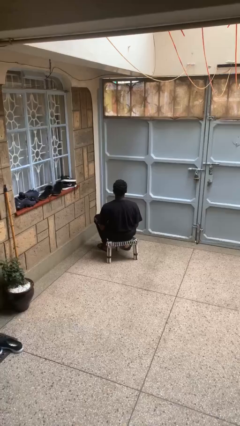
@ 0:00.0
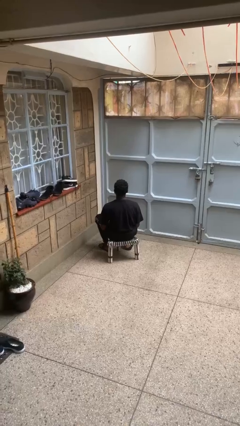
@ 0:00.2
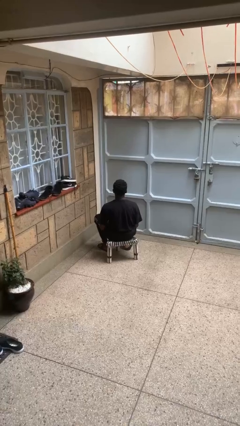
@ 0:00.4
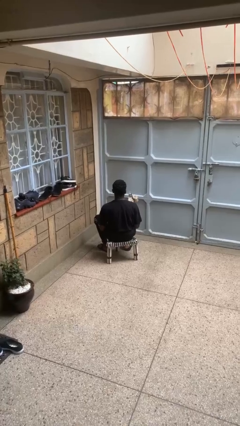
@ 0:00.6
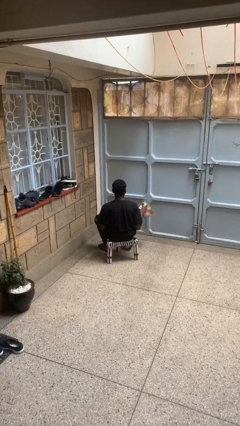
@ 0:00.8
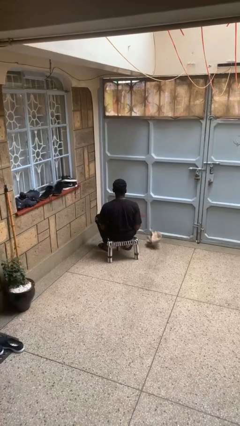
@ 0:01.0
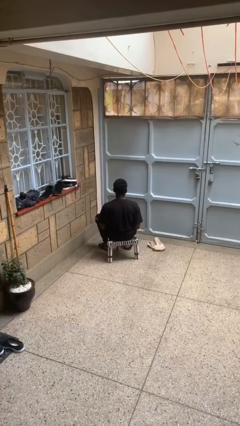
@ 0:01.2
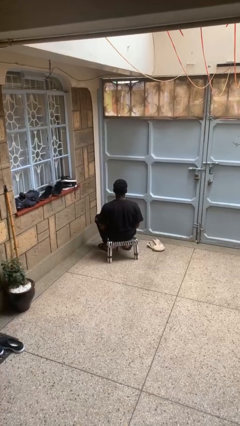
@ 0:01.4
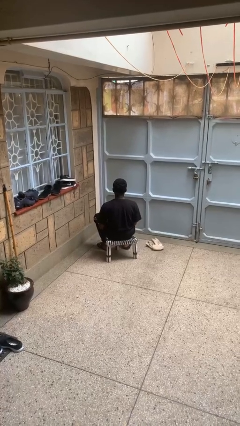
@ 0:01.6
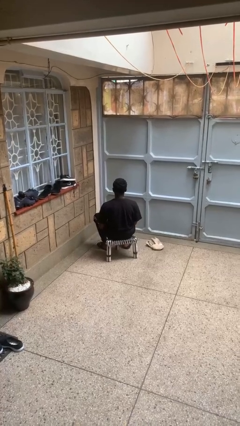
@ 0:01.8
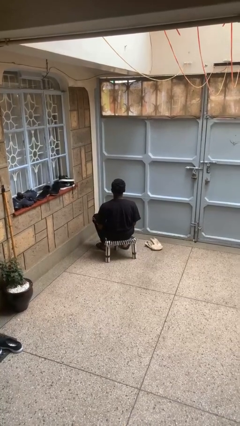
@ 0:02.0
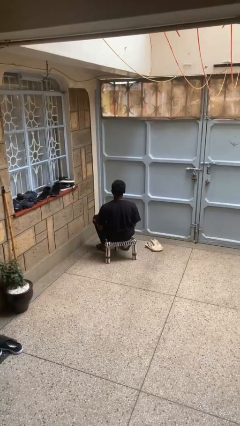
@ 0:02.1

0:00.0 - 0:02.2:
person throws object to ground

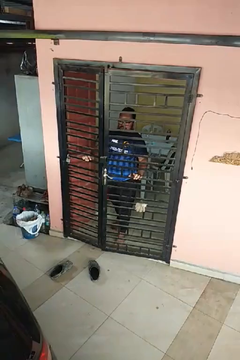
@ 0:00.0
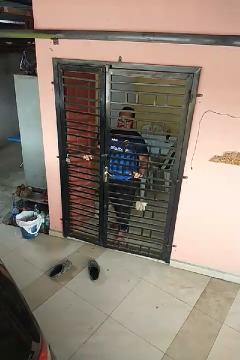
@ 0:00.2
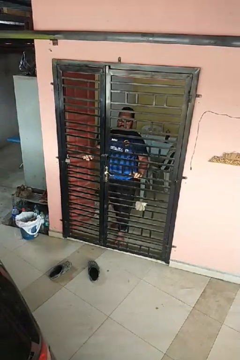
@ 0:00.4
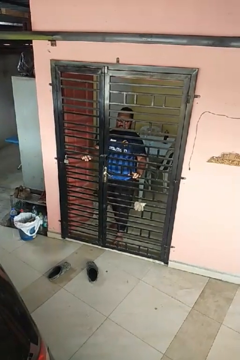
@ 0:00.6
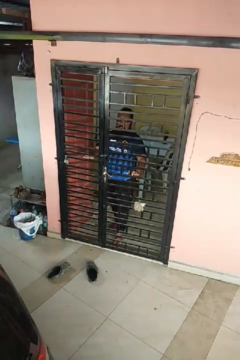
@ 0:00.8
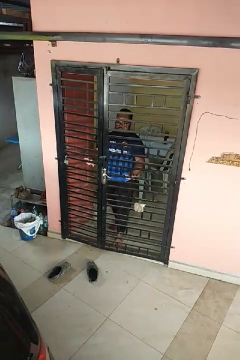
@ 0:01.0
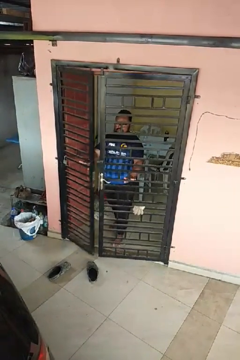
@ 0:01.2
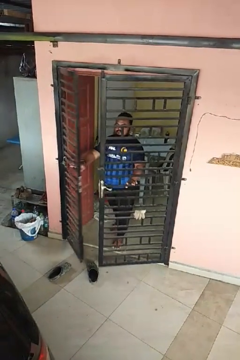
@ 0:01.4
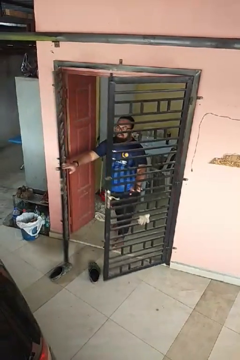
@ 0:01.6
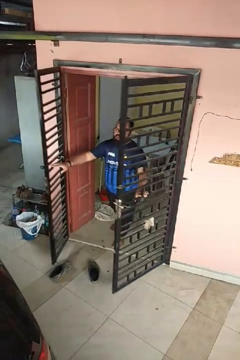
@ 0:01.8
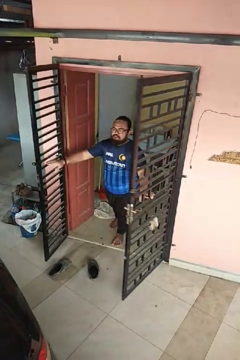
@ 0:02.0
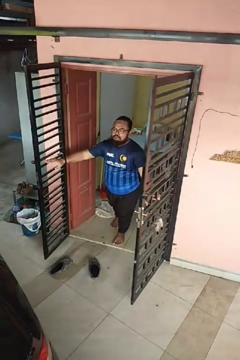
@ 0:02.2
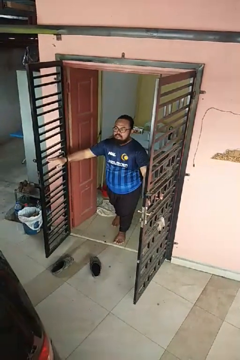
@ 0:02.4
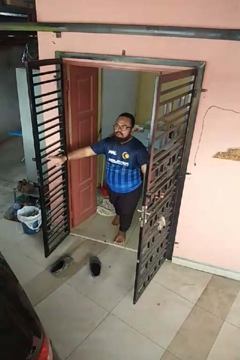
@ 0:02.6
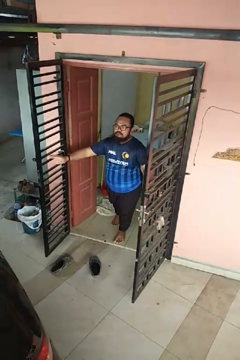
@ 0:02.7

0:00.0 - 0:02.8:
person opens gate

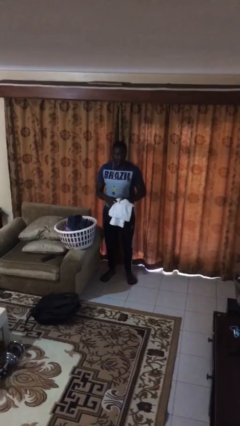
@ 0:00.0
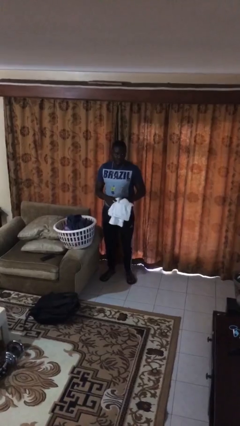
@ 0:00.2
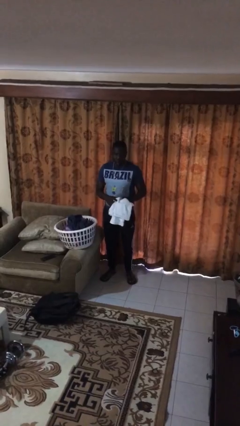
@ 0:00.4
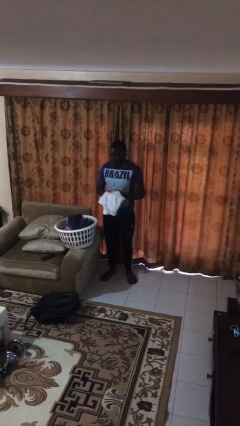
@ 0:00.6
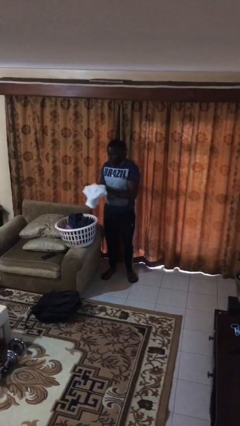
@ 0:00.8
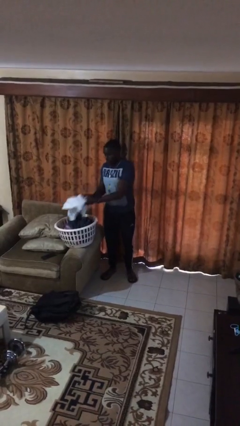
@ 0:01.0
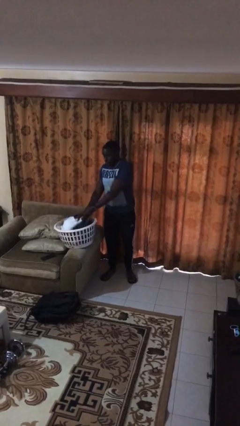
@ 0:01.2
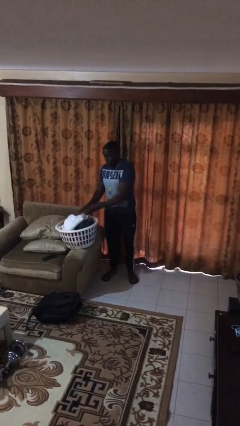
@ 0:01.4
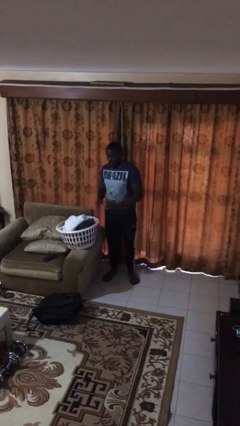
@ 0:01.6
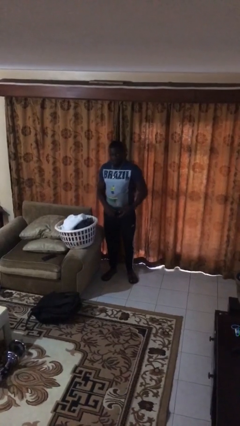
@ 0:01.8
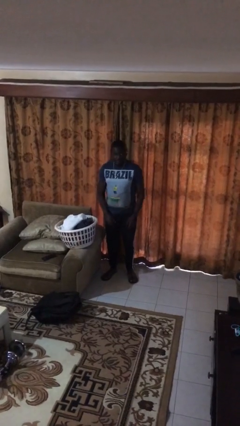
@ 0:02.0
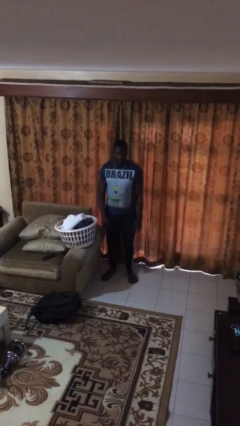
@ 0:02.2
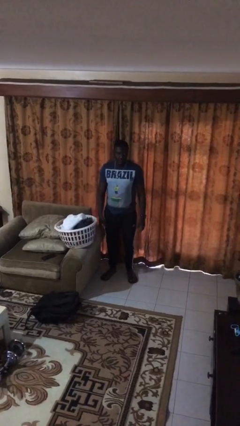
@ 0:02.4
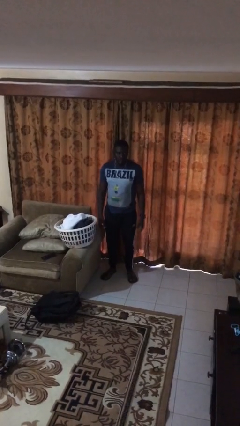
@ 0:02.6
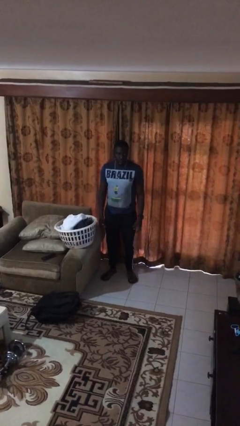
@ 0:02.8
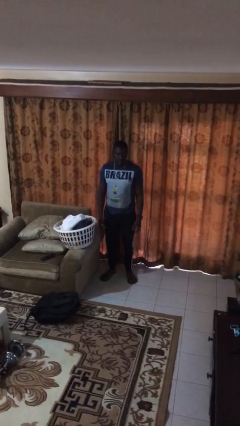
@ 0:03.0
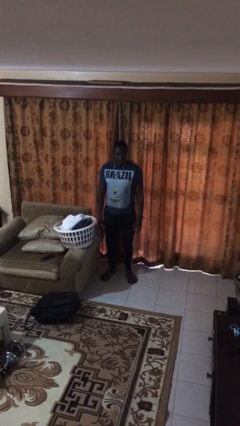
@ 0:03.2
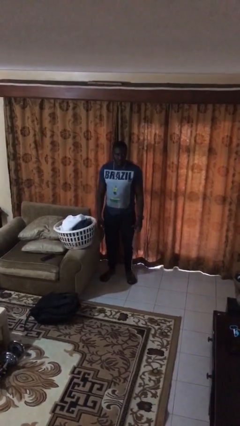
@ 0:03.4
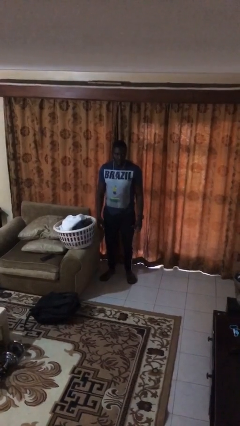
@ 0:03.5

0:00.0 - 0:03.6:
person puts object into basket

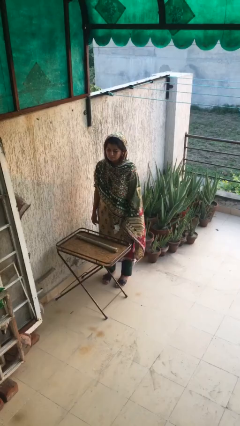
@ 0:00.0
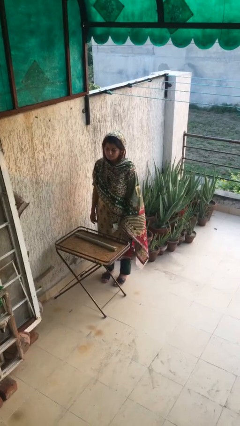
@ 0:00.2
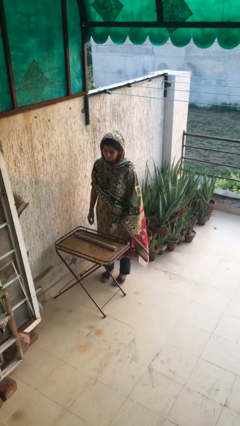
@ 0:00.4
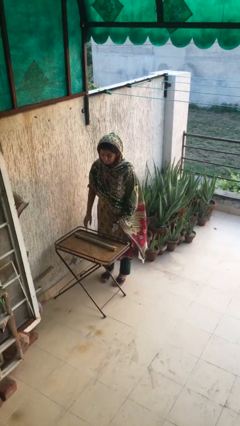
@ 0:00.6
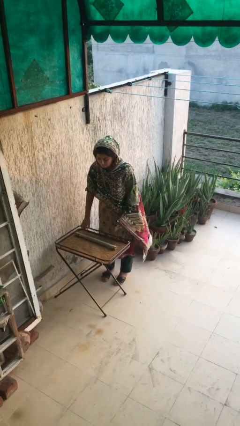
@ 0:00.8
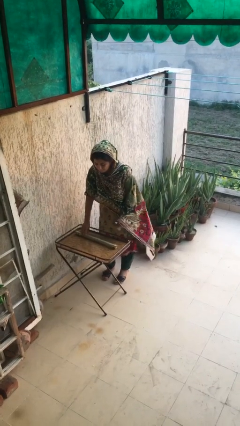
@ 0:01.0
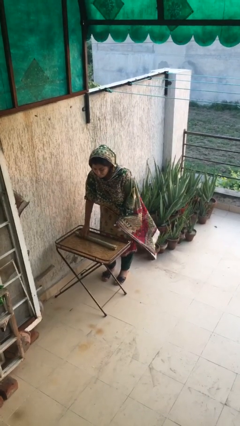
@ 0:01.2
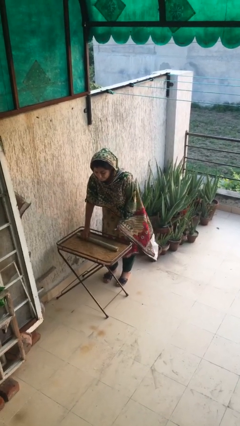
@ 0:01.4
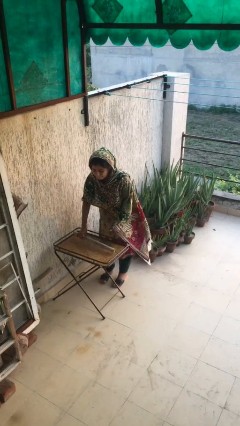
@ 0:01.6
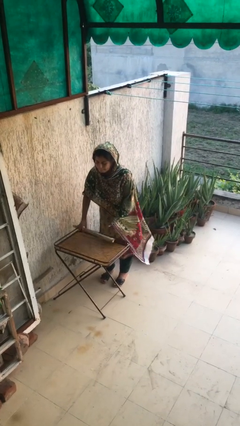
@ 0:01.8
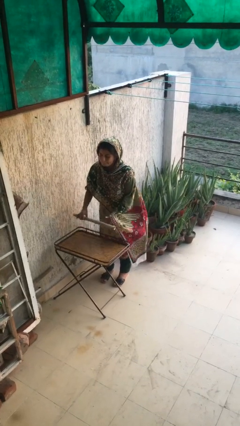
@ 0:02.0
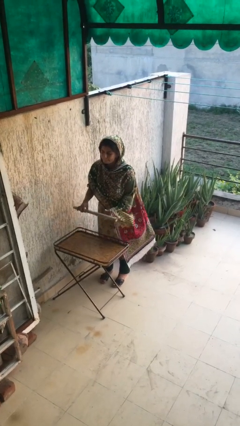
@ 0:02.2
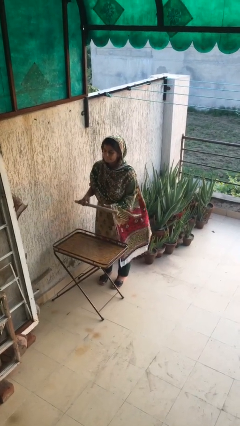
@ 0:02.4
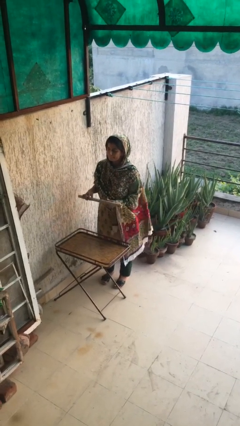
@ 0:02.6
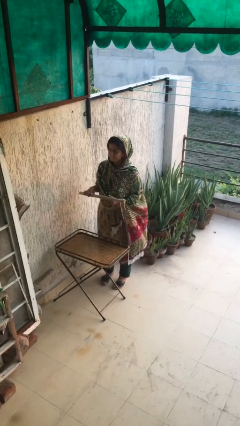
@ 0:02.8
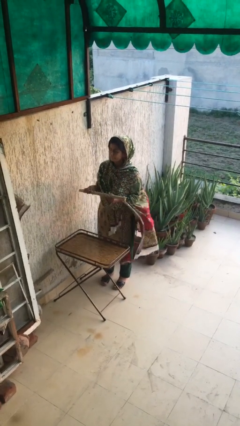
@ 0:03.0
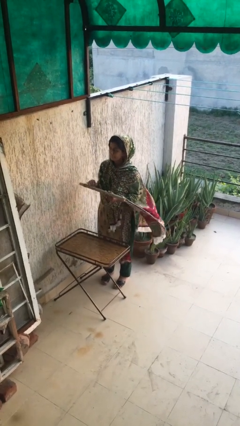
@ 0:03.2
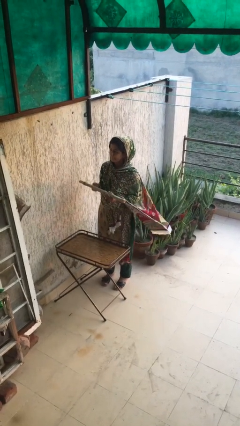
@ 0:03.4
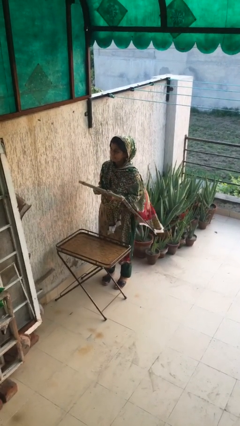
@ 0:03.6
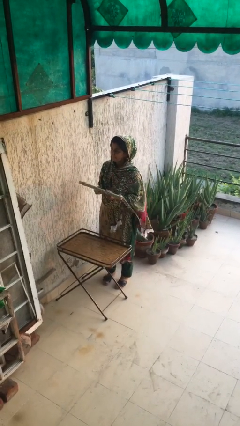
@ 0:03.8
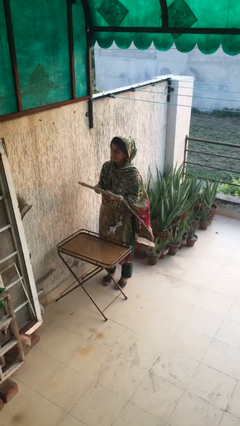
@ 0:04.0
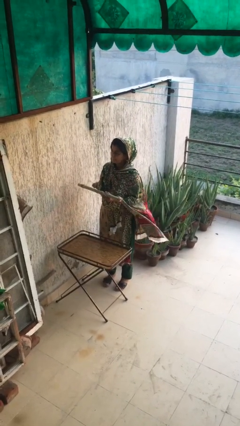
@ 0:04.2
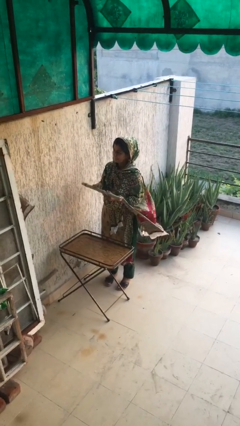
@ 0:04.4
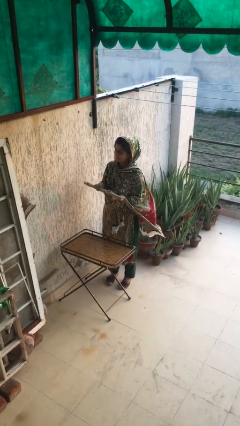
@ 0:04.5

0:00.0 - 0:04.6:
person picks up object from table

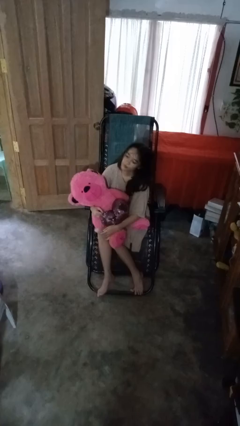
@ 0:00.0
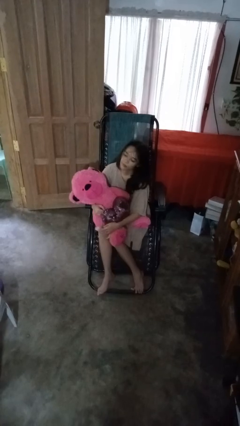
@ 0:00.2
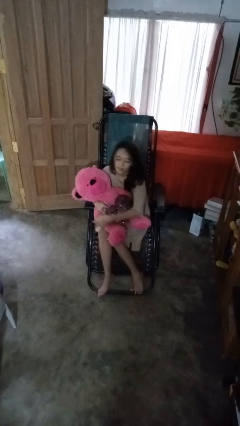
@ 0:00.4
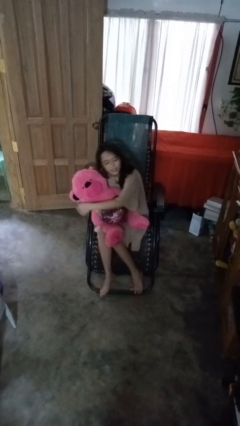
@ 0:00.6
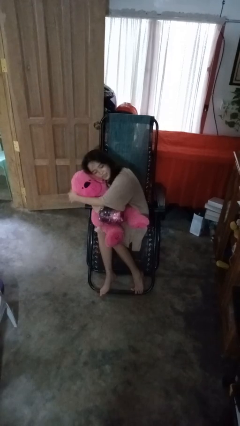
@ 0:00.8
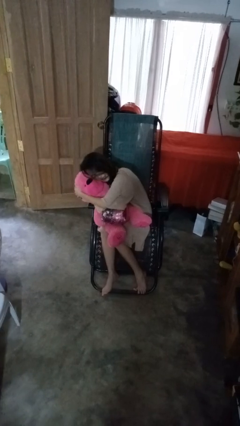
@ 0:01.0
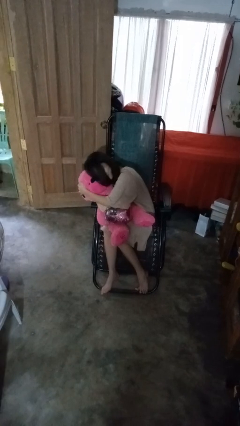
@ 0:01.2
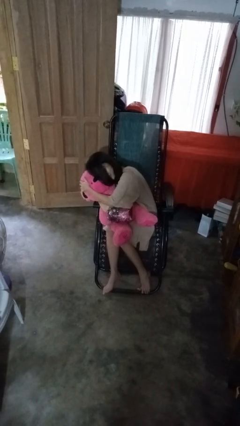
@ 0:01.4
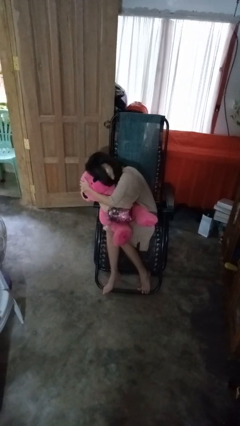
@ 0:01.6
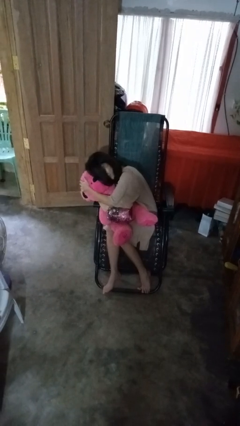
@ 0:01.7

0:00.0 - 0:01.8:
person hugs stuffed animal

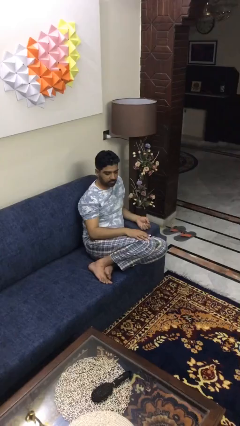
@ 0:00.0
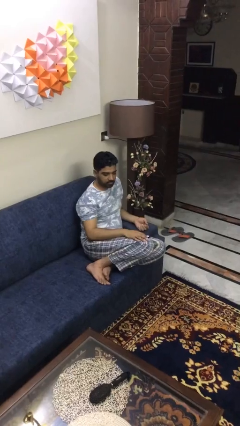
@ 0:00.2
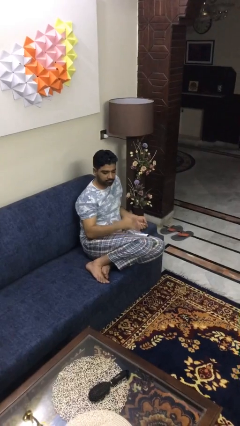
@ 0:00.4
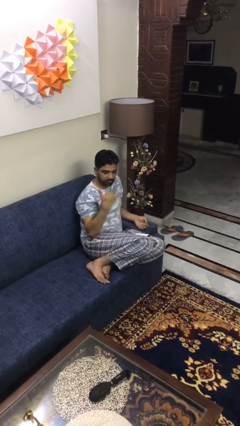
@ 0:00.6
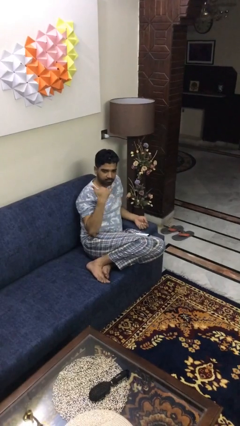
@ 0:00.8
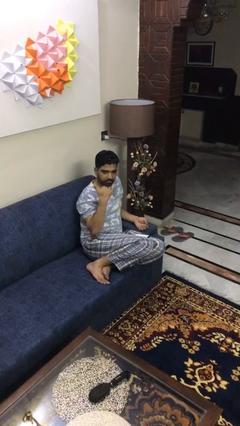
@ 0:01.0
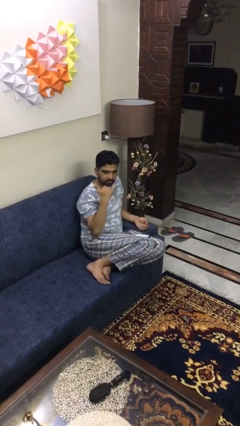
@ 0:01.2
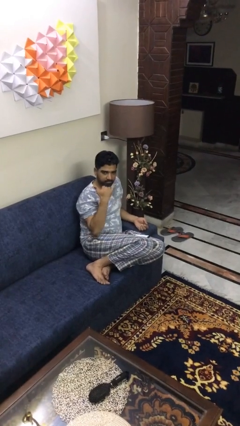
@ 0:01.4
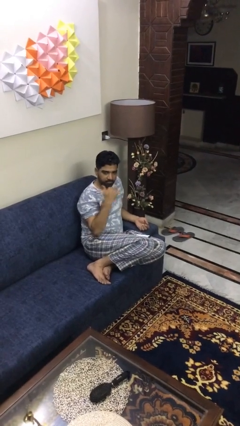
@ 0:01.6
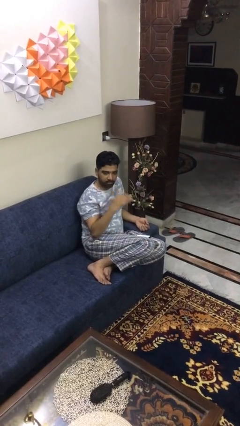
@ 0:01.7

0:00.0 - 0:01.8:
person gestures hang loose

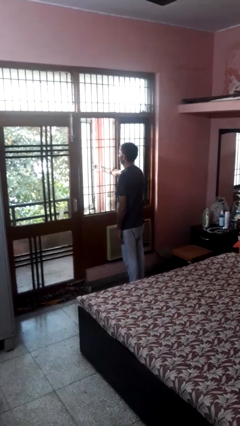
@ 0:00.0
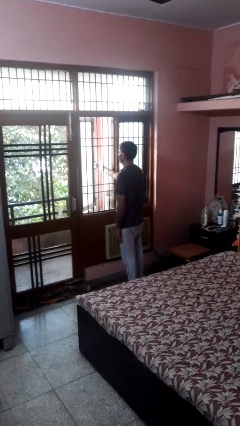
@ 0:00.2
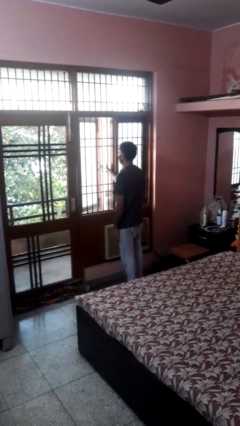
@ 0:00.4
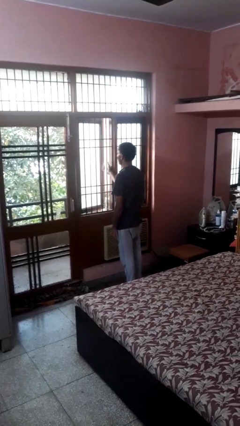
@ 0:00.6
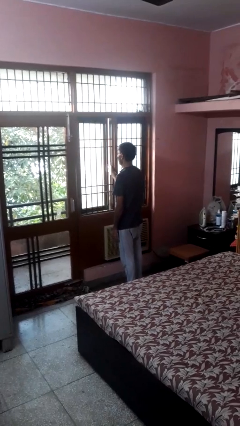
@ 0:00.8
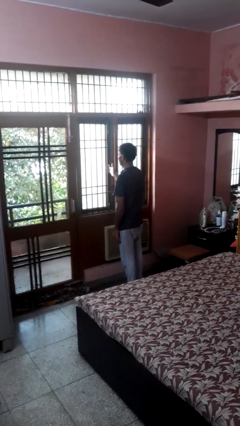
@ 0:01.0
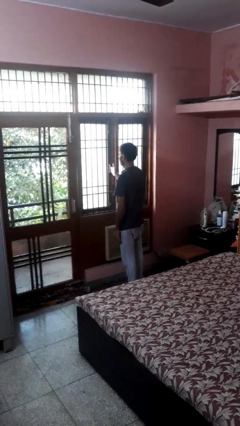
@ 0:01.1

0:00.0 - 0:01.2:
person closes home window
